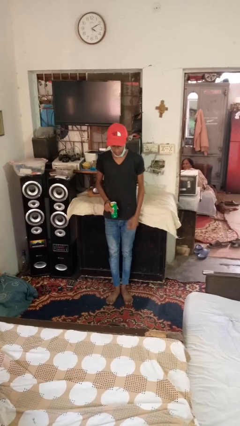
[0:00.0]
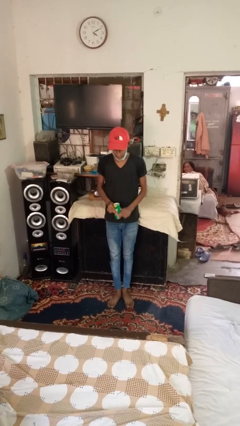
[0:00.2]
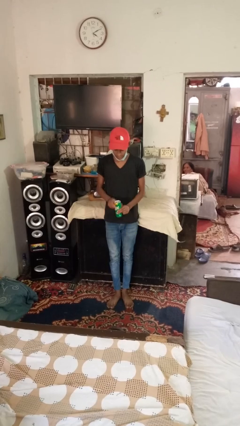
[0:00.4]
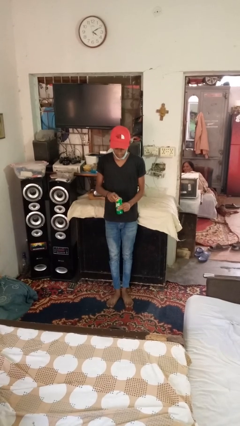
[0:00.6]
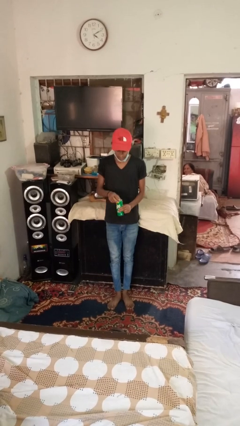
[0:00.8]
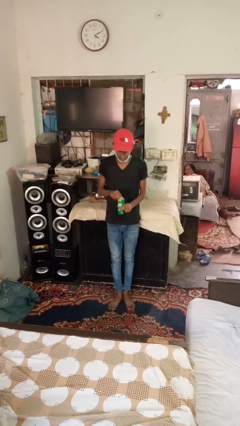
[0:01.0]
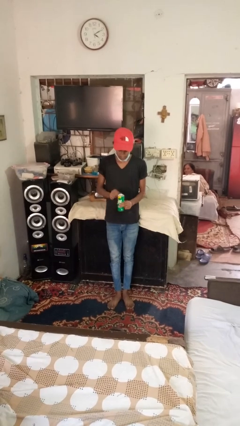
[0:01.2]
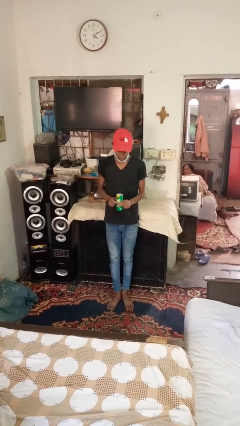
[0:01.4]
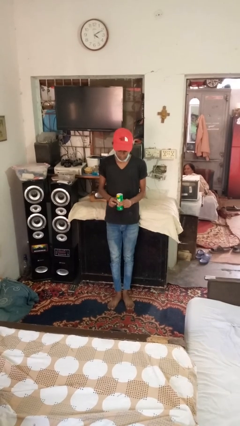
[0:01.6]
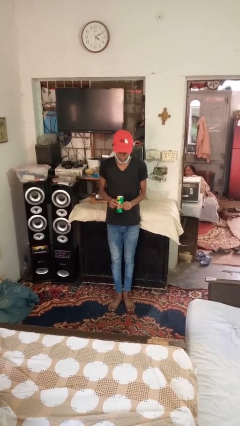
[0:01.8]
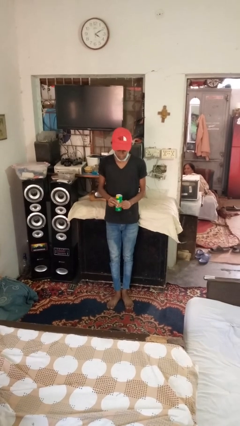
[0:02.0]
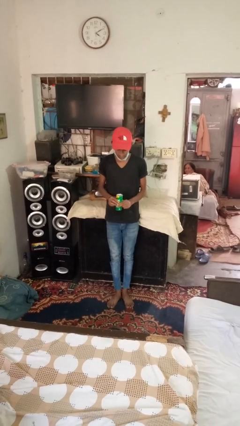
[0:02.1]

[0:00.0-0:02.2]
person opens beverage can

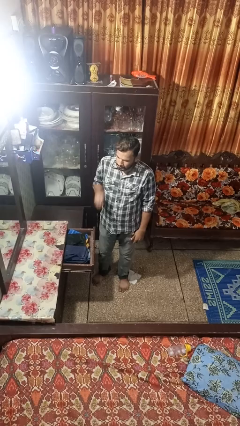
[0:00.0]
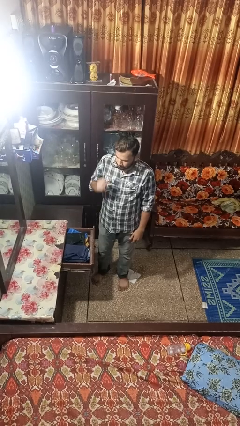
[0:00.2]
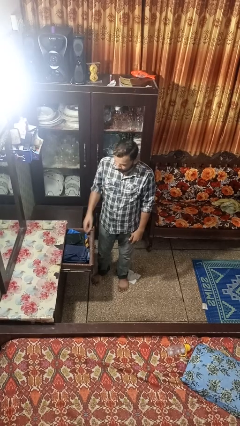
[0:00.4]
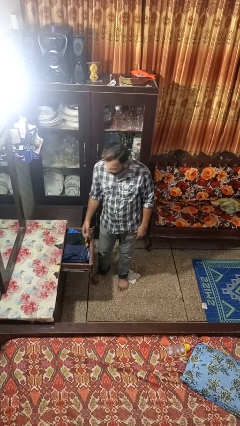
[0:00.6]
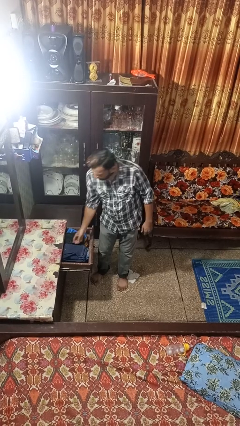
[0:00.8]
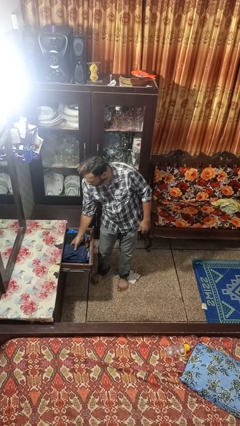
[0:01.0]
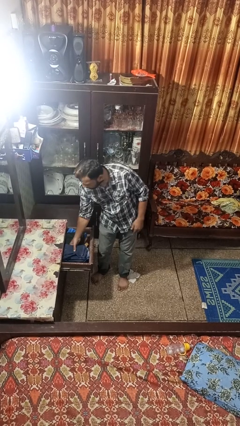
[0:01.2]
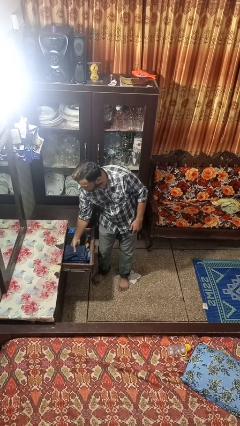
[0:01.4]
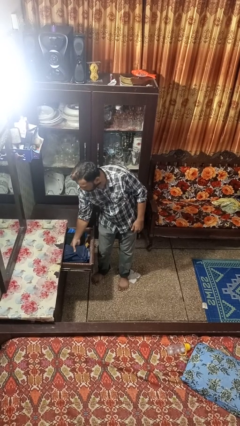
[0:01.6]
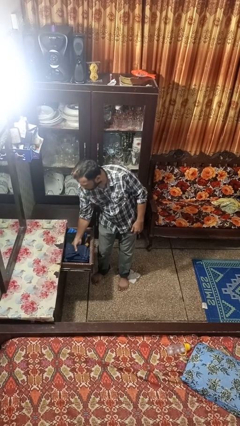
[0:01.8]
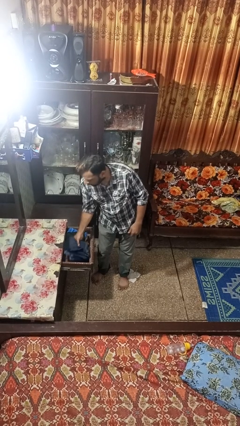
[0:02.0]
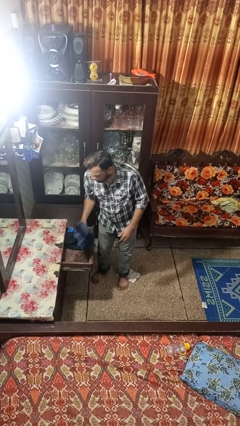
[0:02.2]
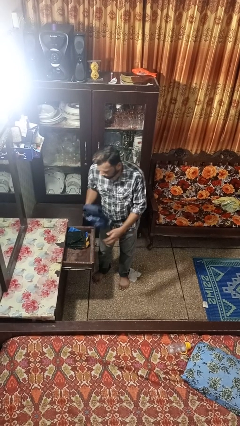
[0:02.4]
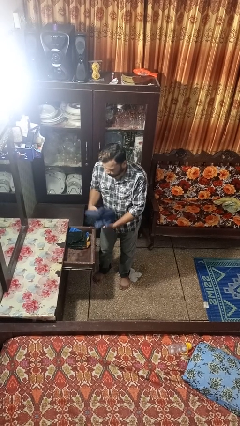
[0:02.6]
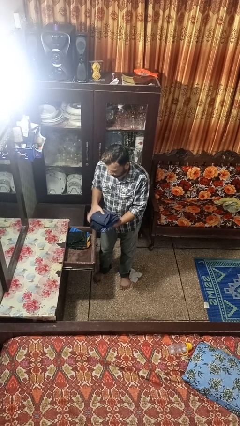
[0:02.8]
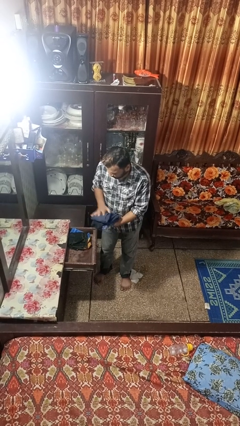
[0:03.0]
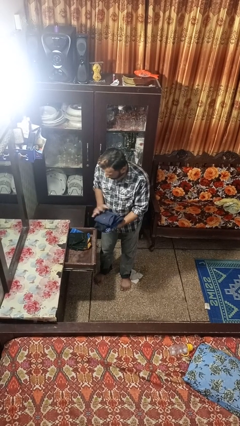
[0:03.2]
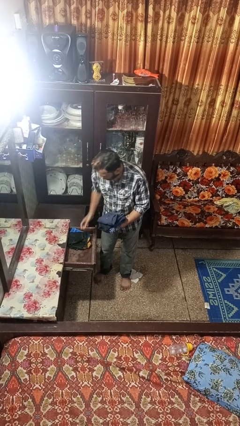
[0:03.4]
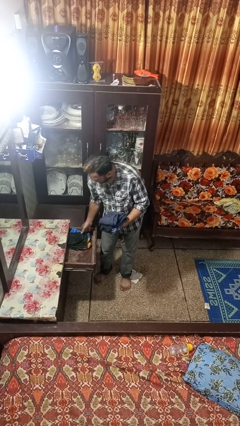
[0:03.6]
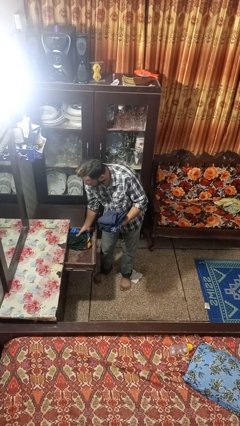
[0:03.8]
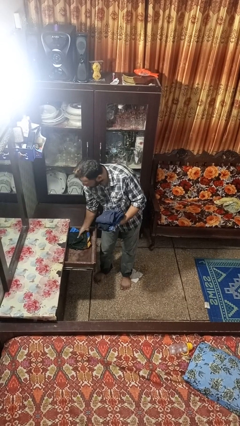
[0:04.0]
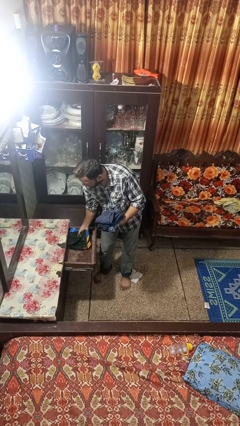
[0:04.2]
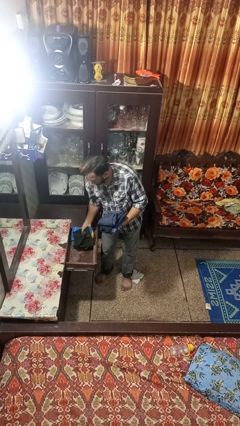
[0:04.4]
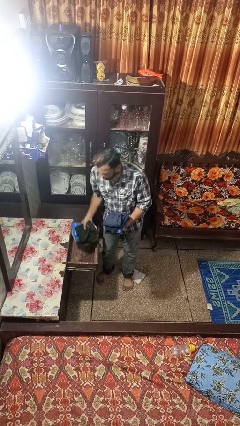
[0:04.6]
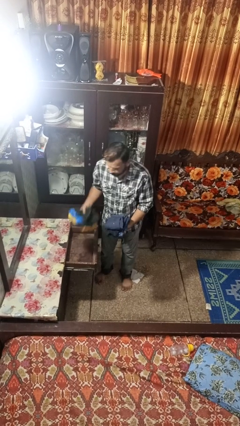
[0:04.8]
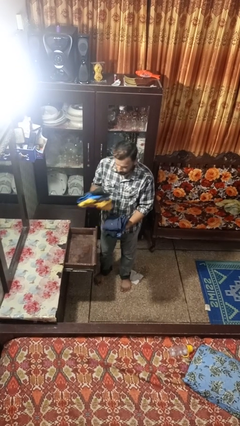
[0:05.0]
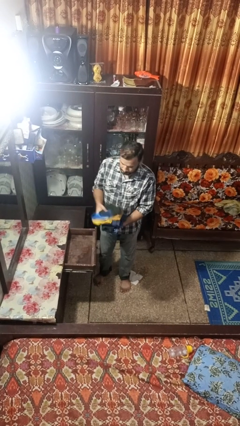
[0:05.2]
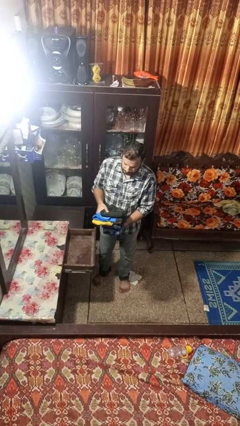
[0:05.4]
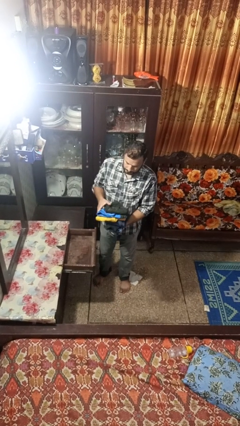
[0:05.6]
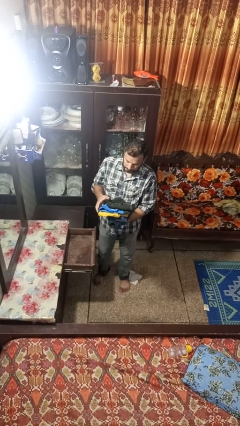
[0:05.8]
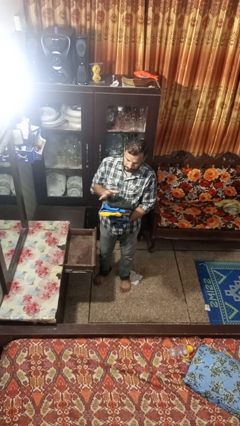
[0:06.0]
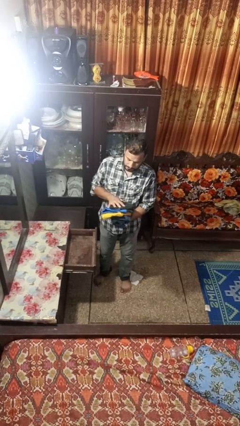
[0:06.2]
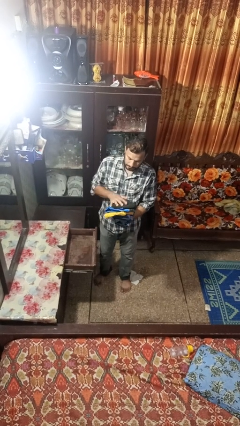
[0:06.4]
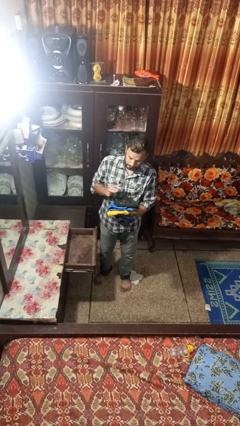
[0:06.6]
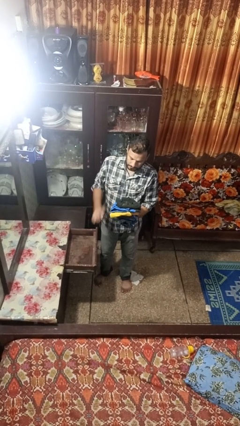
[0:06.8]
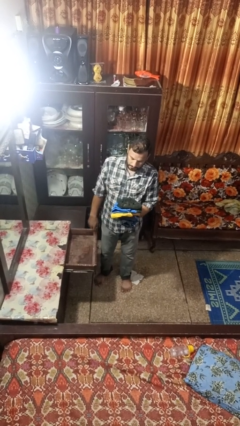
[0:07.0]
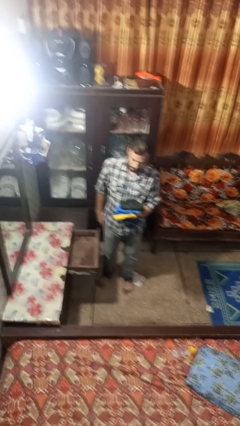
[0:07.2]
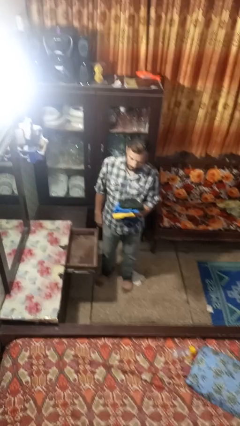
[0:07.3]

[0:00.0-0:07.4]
person takes clothes from dresser

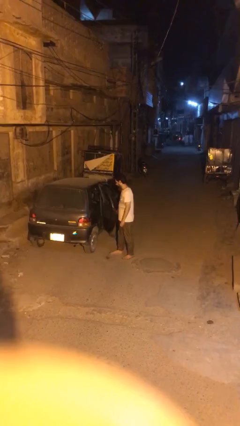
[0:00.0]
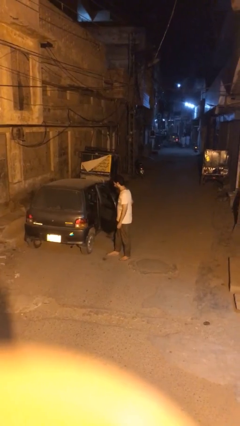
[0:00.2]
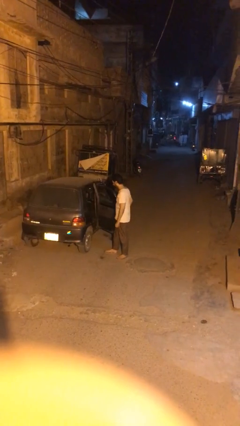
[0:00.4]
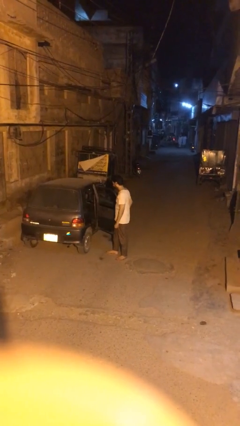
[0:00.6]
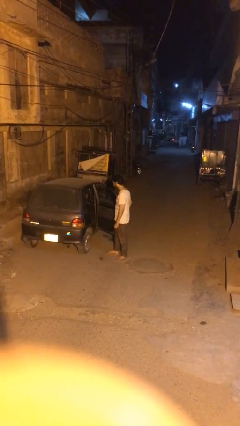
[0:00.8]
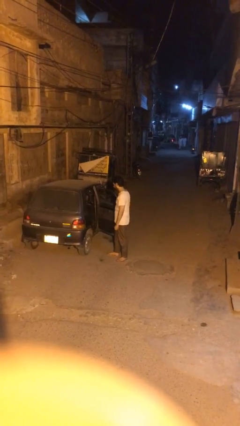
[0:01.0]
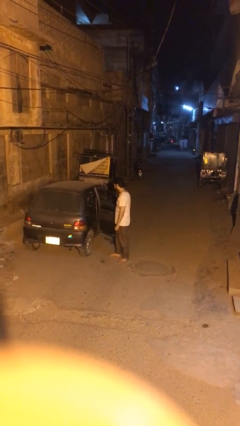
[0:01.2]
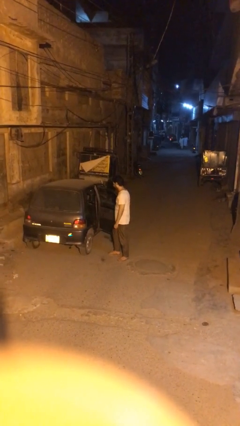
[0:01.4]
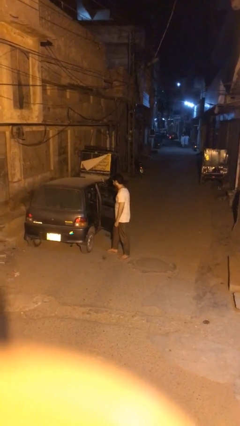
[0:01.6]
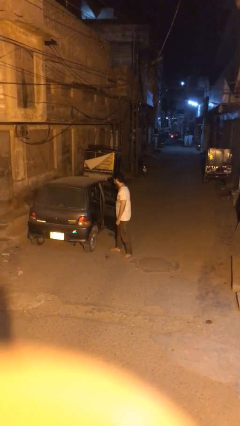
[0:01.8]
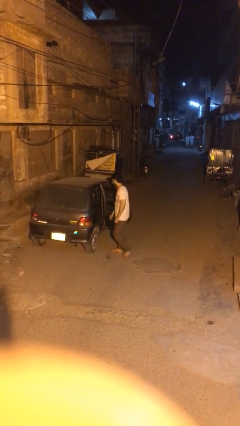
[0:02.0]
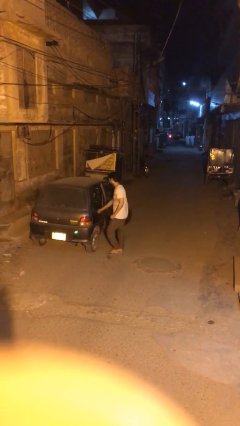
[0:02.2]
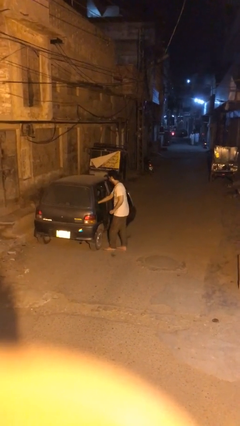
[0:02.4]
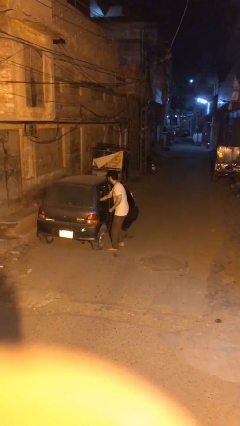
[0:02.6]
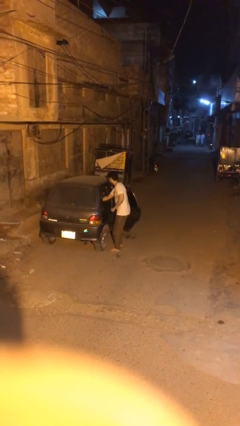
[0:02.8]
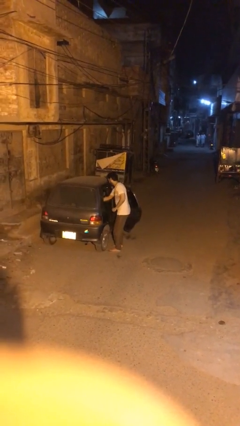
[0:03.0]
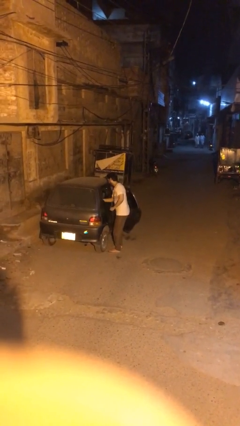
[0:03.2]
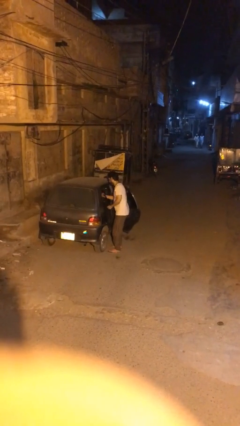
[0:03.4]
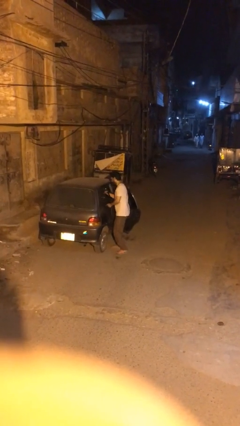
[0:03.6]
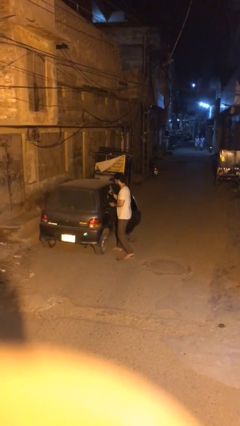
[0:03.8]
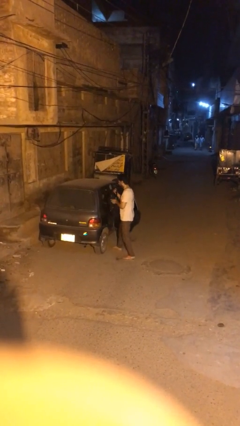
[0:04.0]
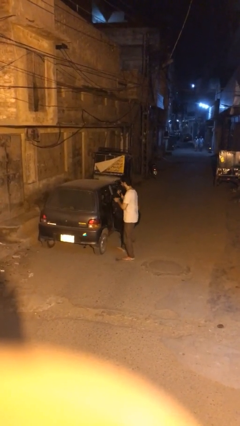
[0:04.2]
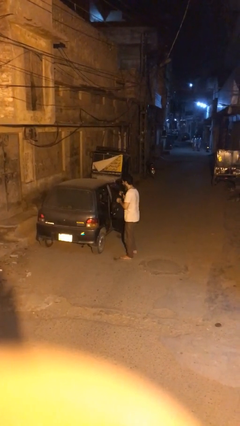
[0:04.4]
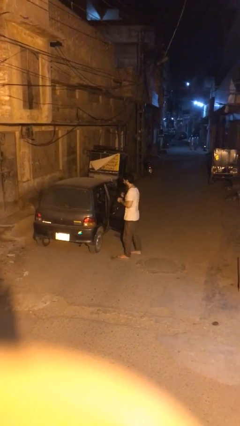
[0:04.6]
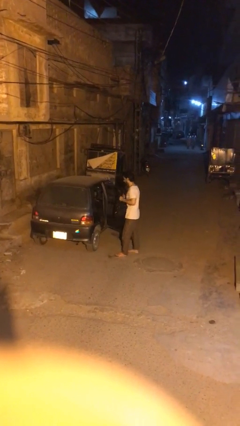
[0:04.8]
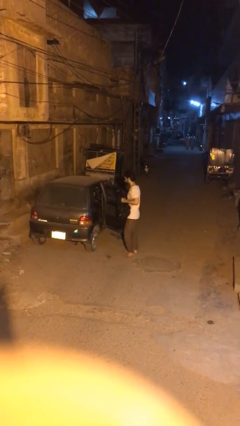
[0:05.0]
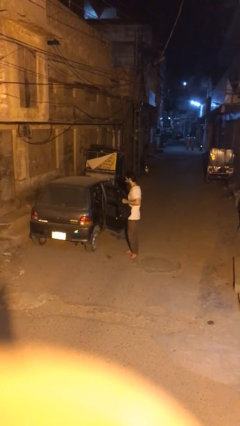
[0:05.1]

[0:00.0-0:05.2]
person unloads car

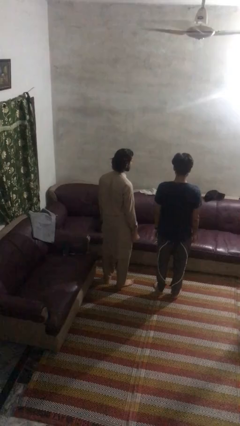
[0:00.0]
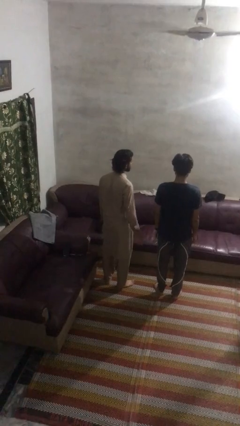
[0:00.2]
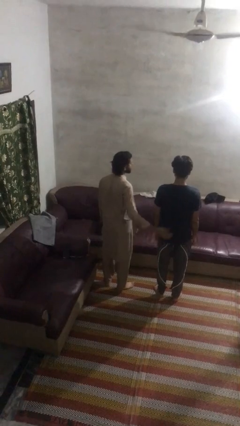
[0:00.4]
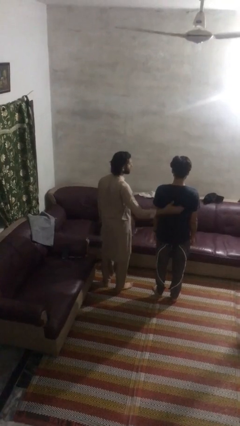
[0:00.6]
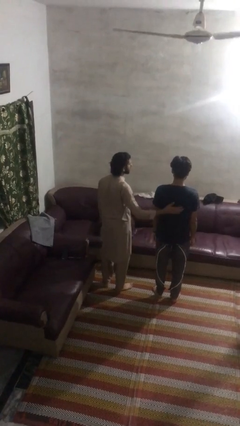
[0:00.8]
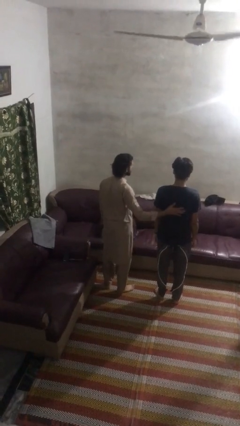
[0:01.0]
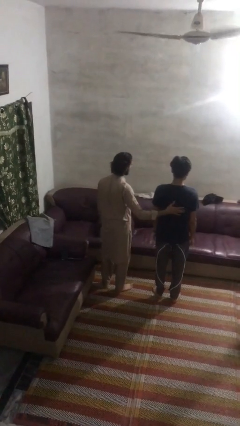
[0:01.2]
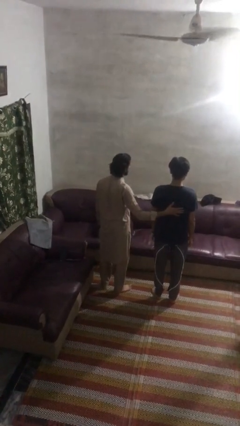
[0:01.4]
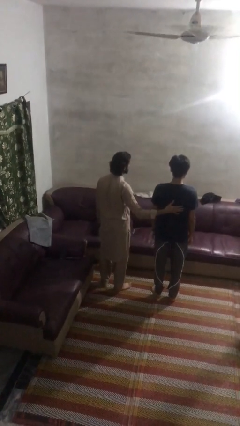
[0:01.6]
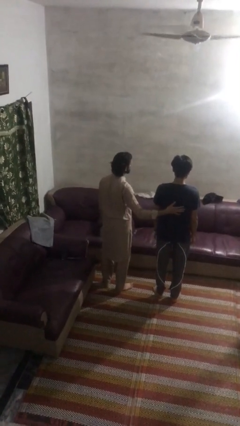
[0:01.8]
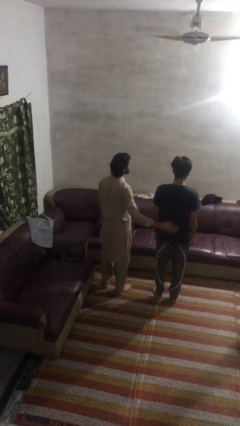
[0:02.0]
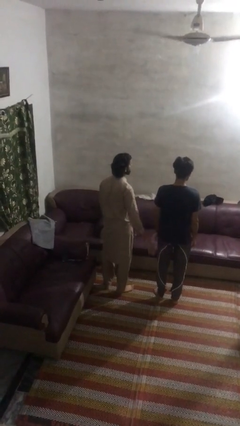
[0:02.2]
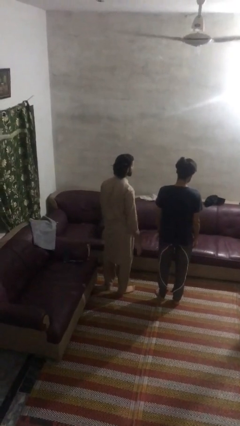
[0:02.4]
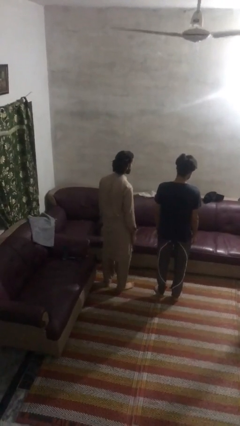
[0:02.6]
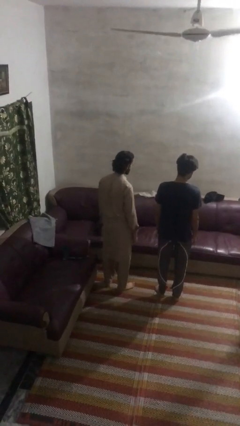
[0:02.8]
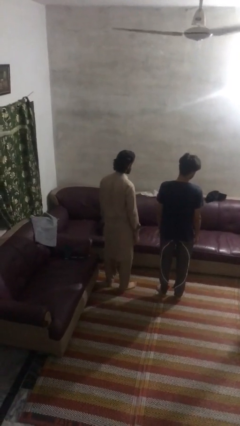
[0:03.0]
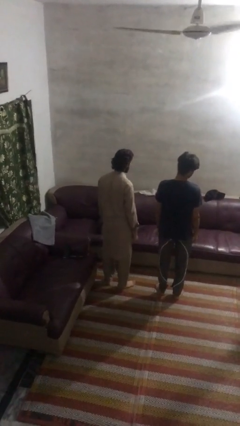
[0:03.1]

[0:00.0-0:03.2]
person touches back of person
